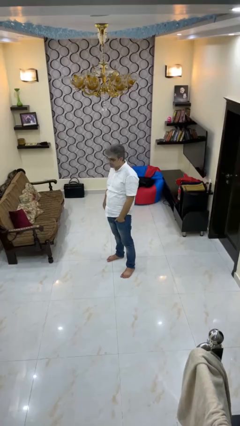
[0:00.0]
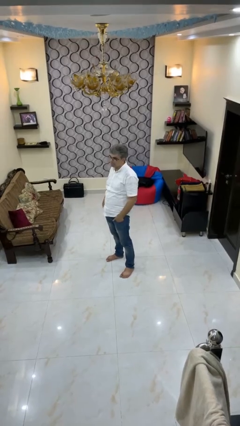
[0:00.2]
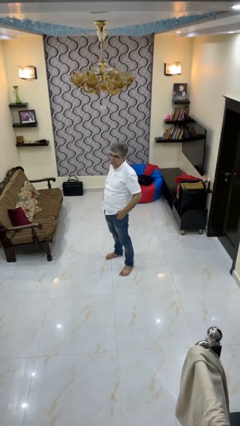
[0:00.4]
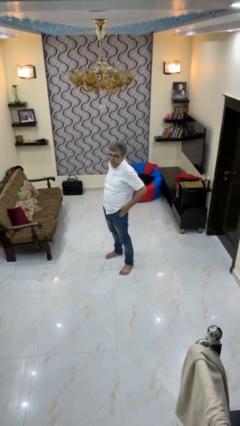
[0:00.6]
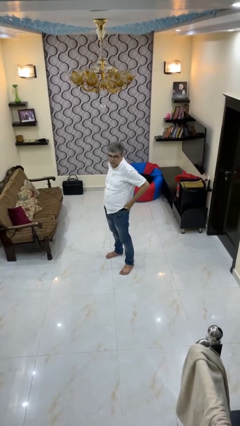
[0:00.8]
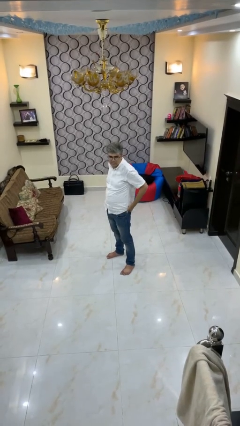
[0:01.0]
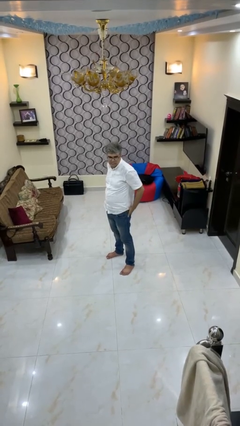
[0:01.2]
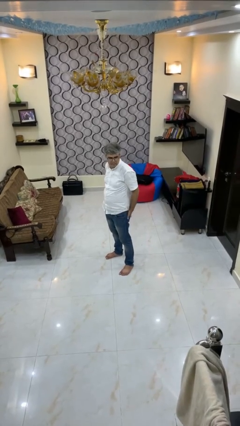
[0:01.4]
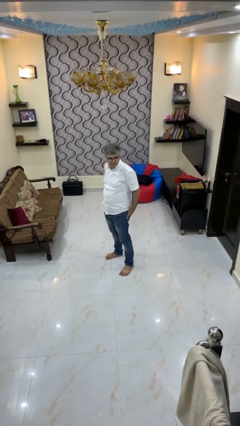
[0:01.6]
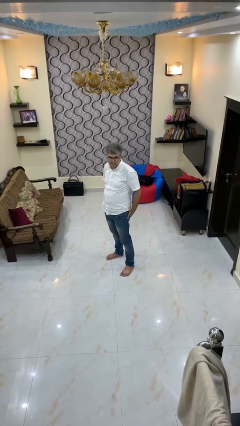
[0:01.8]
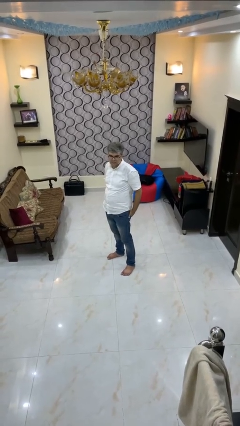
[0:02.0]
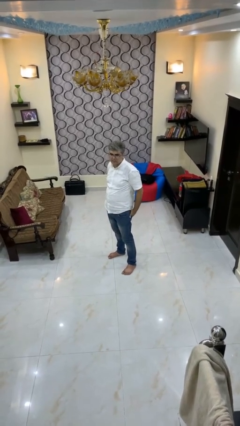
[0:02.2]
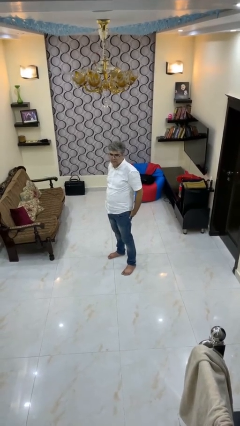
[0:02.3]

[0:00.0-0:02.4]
person puts hands in back pockets

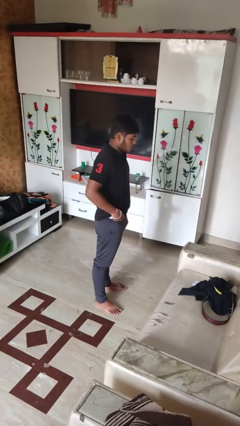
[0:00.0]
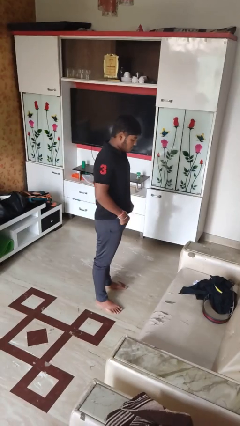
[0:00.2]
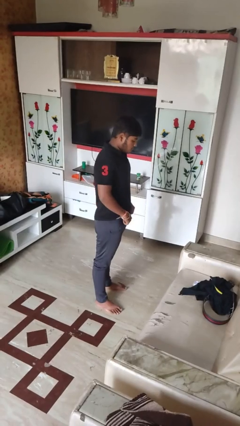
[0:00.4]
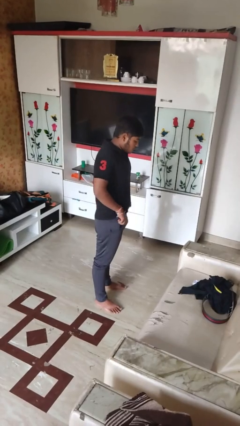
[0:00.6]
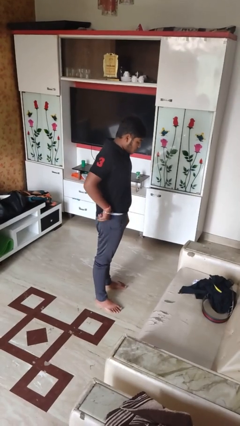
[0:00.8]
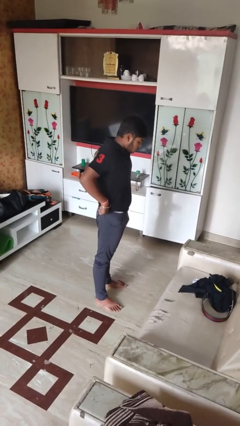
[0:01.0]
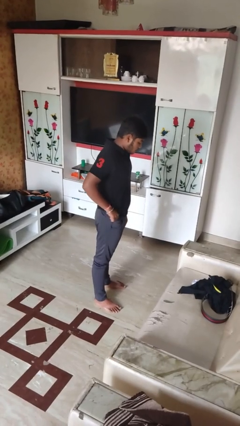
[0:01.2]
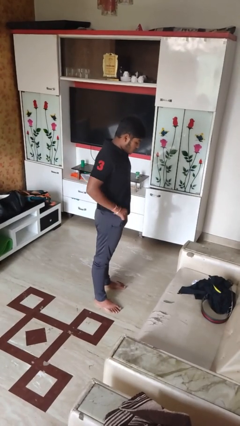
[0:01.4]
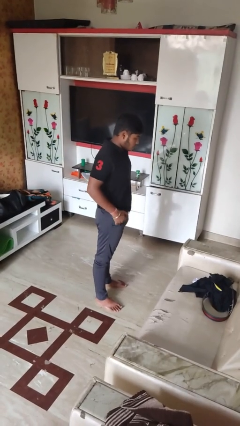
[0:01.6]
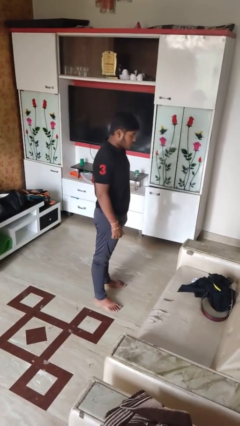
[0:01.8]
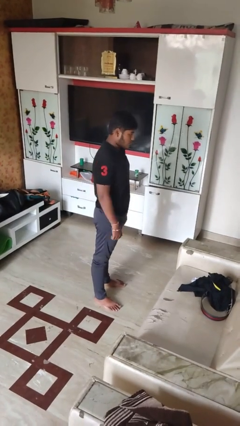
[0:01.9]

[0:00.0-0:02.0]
person hikes up pants

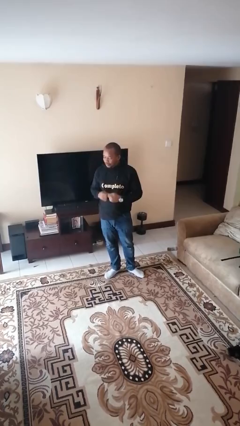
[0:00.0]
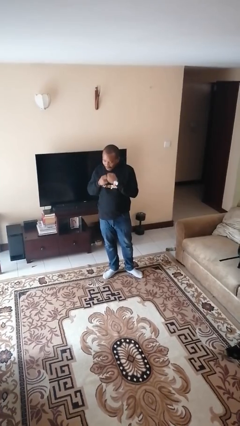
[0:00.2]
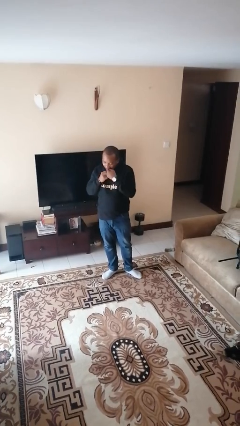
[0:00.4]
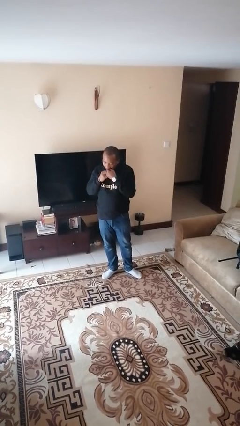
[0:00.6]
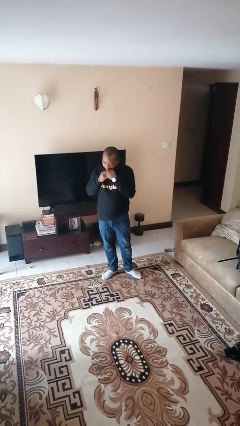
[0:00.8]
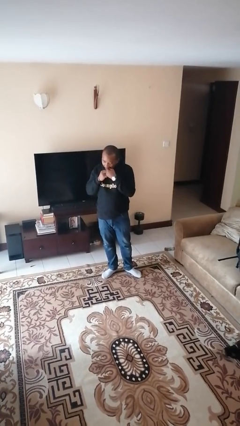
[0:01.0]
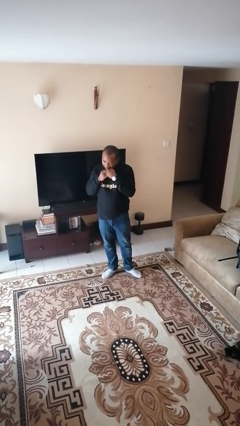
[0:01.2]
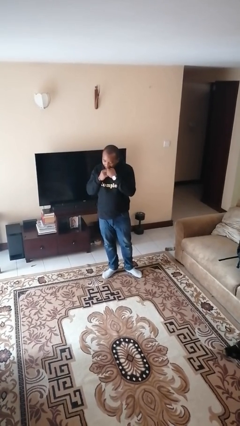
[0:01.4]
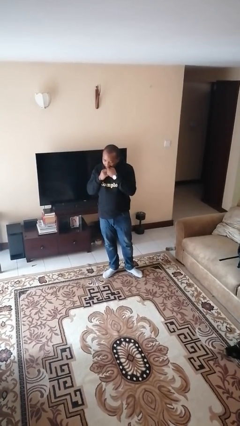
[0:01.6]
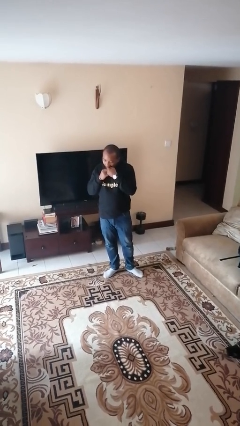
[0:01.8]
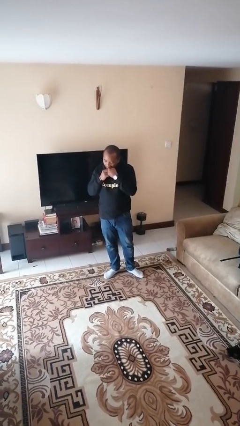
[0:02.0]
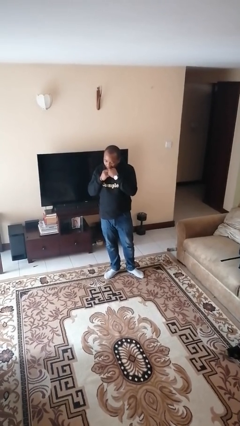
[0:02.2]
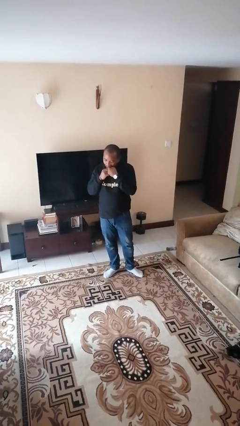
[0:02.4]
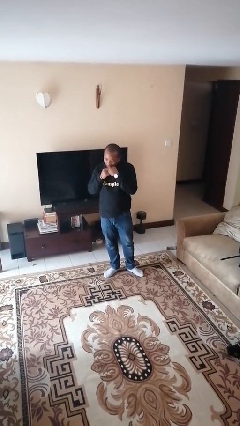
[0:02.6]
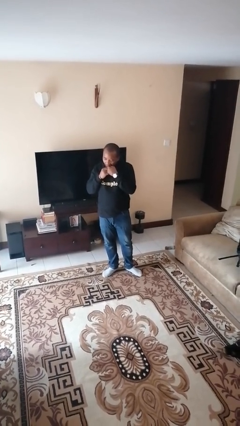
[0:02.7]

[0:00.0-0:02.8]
person flosses

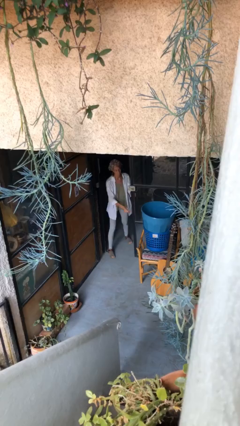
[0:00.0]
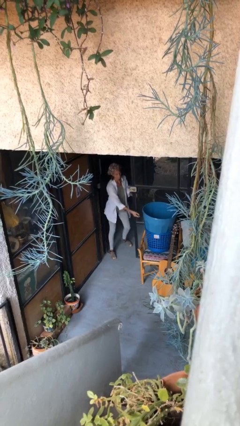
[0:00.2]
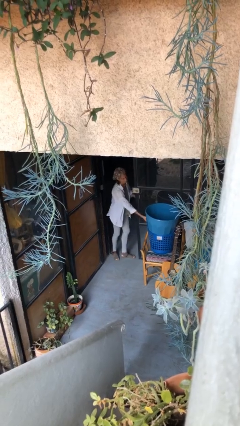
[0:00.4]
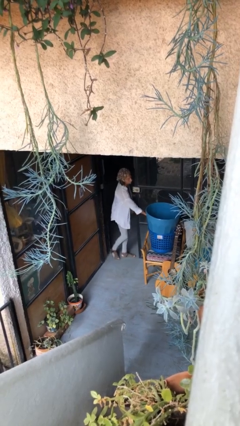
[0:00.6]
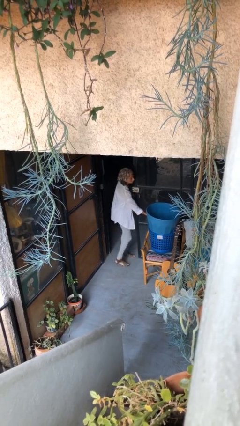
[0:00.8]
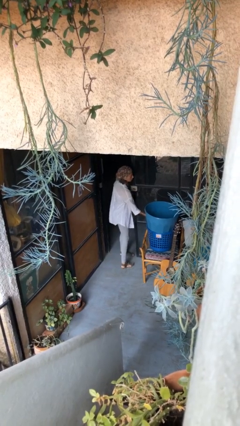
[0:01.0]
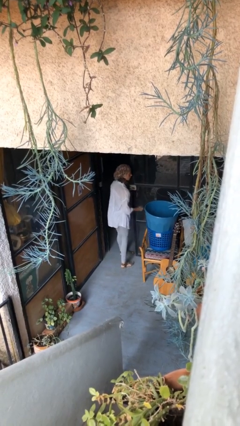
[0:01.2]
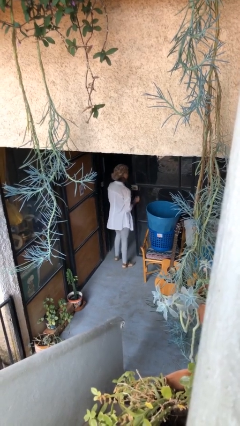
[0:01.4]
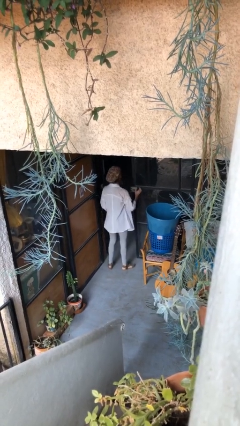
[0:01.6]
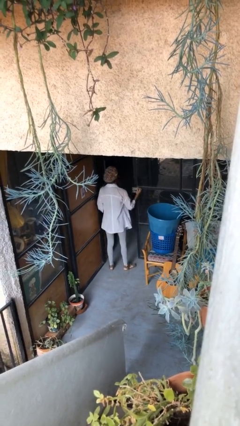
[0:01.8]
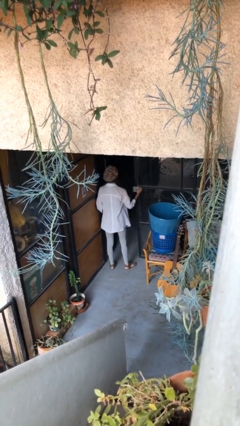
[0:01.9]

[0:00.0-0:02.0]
person enters scene through structure

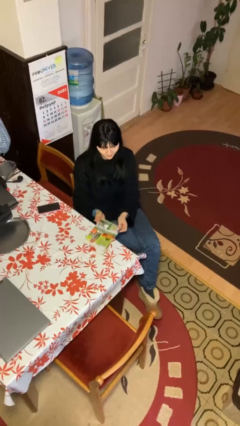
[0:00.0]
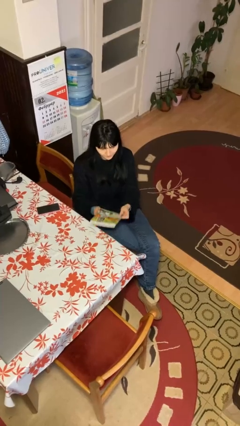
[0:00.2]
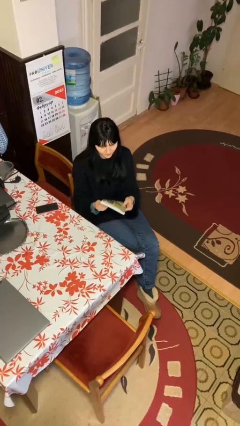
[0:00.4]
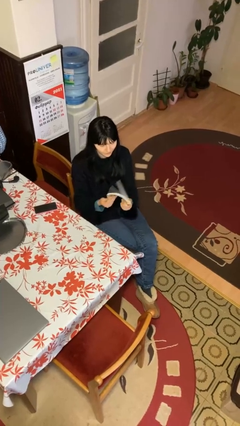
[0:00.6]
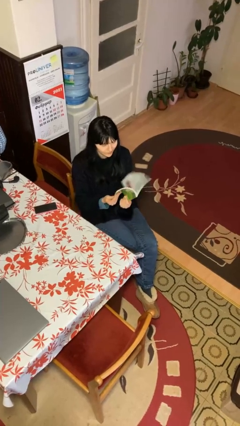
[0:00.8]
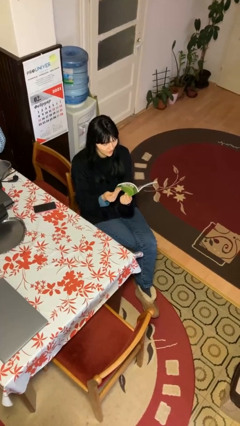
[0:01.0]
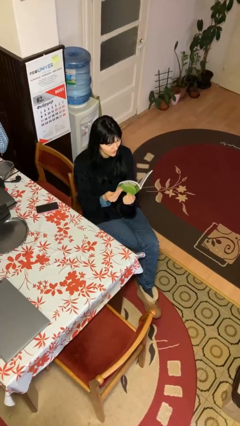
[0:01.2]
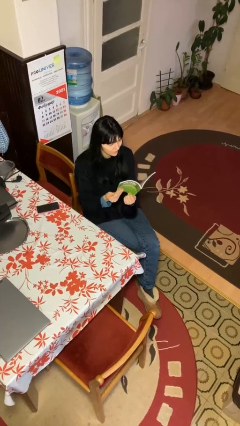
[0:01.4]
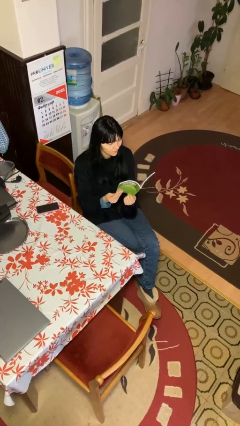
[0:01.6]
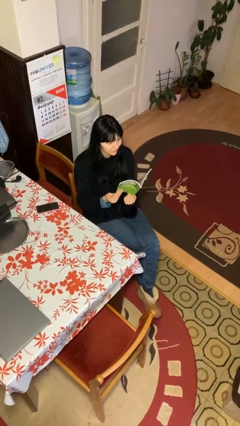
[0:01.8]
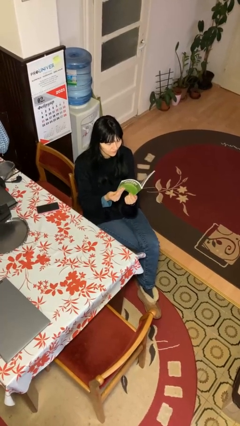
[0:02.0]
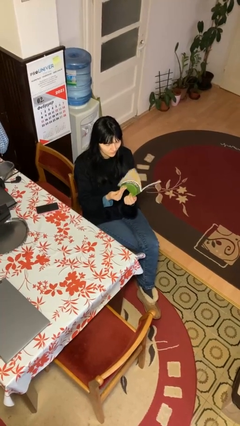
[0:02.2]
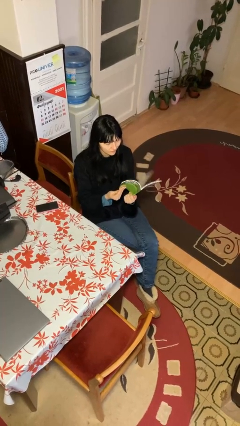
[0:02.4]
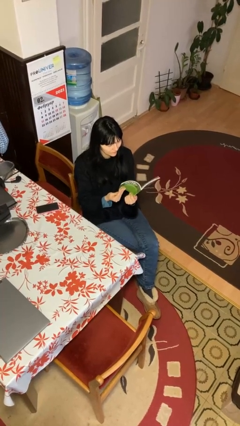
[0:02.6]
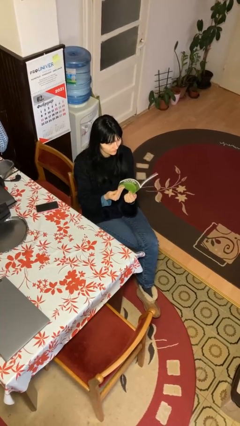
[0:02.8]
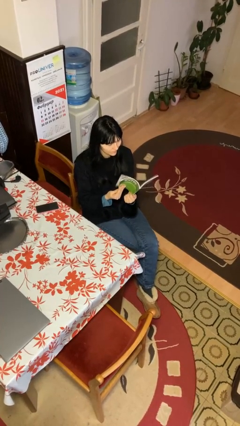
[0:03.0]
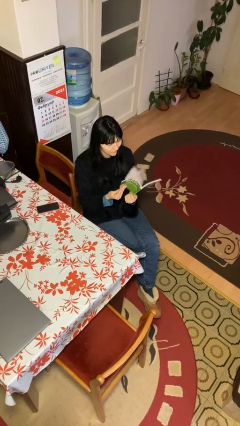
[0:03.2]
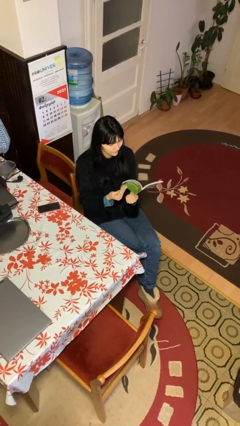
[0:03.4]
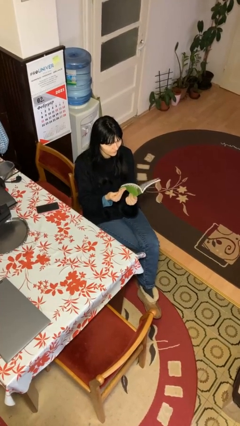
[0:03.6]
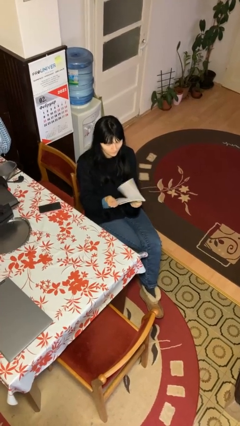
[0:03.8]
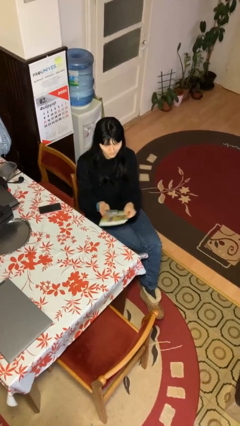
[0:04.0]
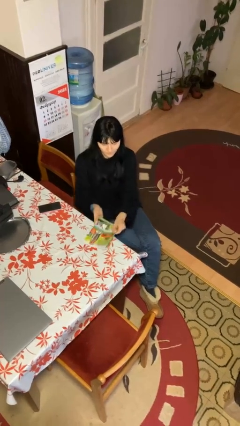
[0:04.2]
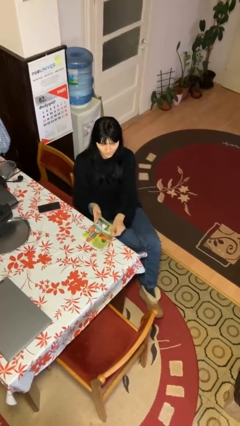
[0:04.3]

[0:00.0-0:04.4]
person reads document

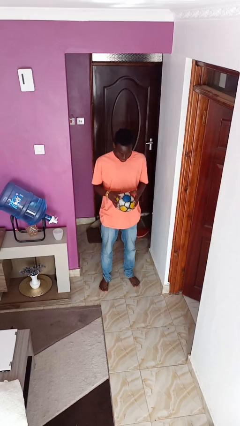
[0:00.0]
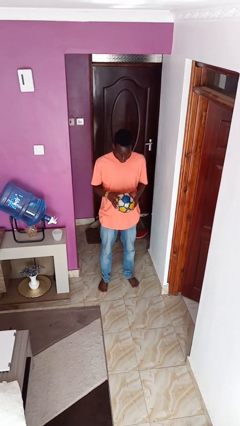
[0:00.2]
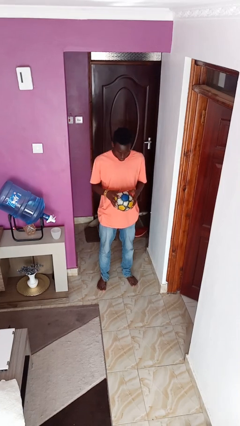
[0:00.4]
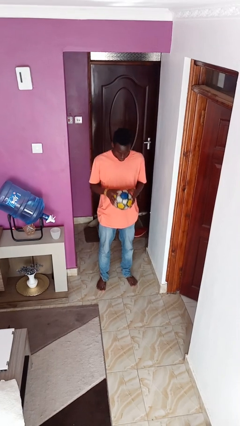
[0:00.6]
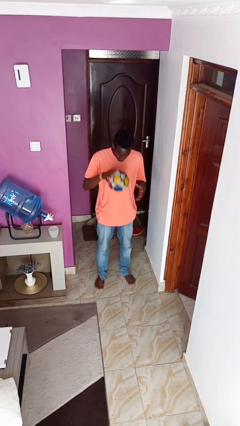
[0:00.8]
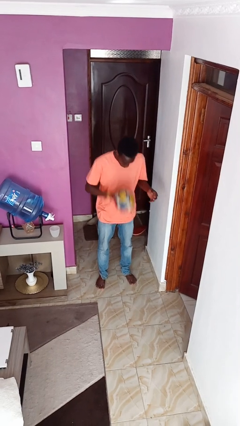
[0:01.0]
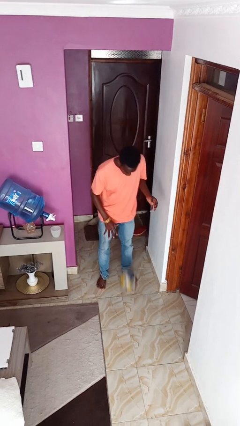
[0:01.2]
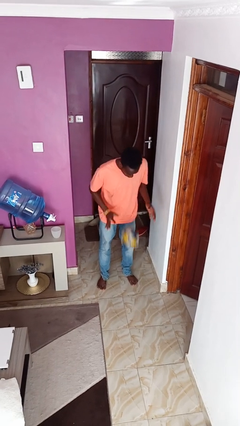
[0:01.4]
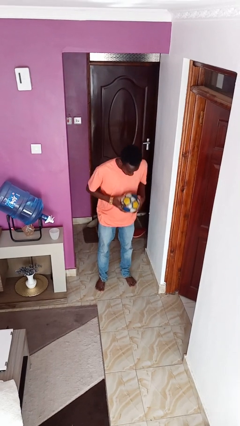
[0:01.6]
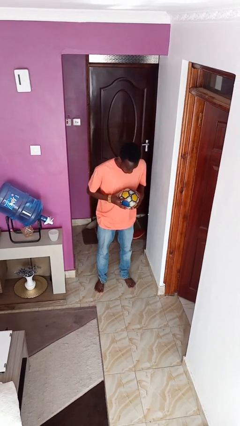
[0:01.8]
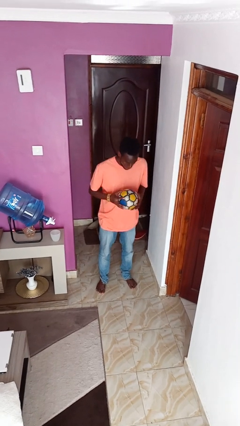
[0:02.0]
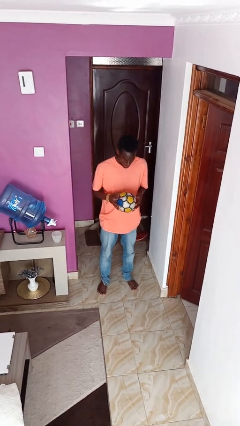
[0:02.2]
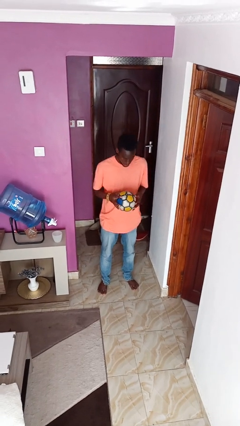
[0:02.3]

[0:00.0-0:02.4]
person bounces ball on floor

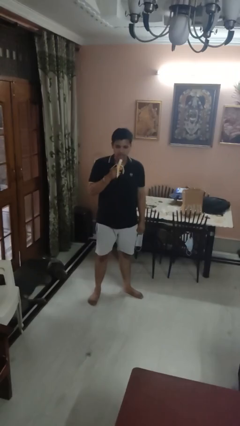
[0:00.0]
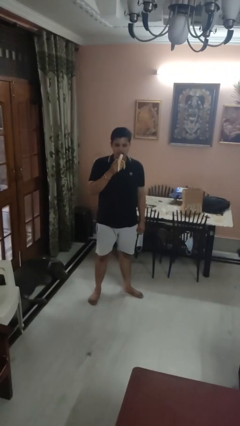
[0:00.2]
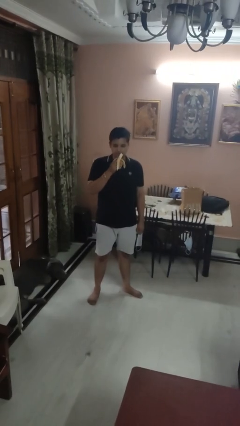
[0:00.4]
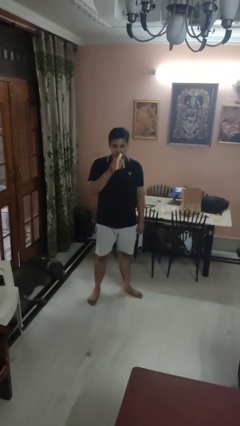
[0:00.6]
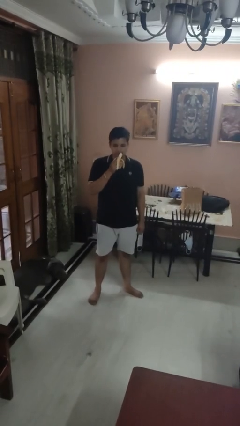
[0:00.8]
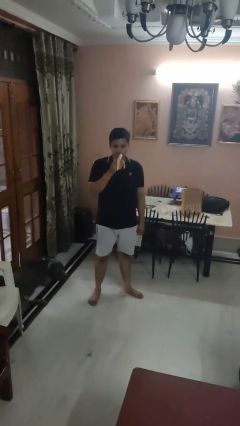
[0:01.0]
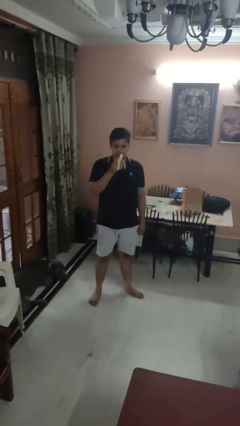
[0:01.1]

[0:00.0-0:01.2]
person eats banana
